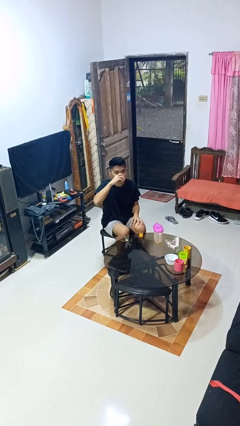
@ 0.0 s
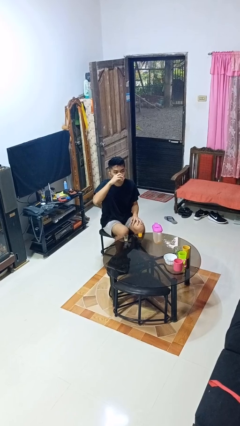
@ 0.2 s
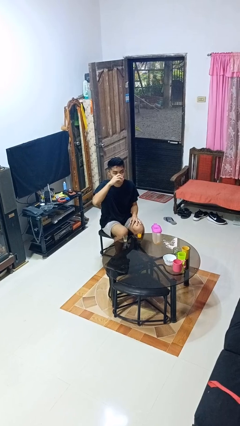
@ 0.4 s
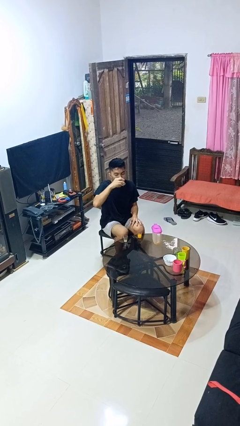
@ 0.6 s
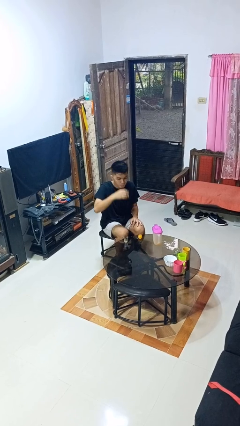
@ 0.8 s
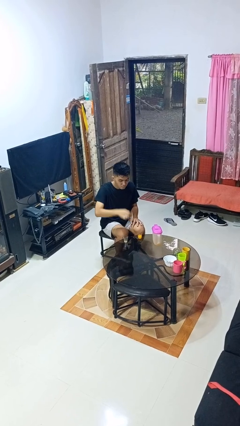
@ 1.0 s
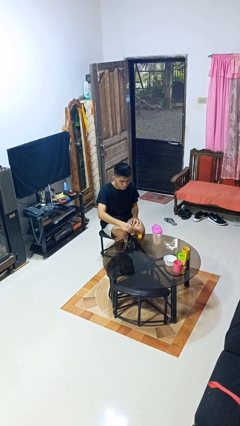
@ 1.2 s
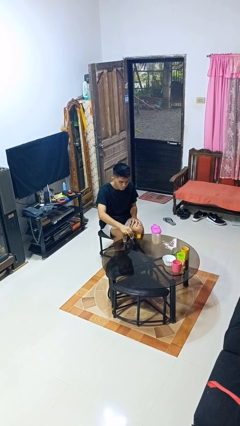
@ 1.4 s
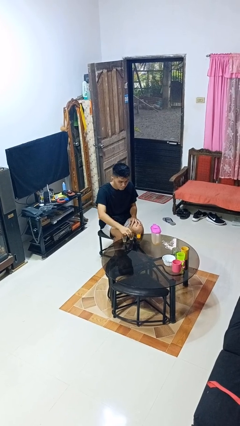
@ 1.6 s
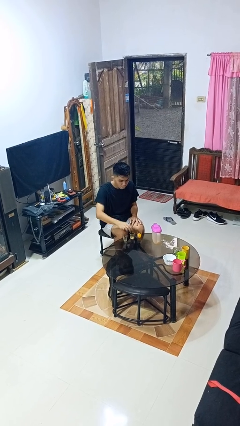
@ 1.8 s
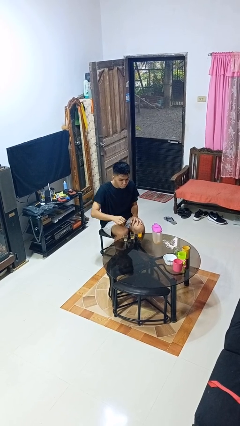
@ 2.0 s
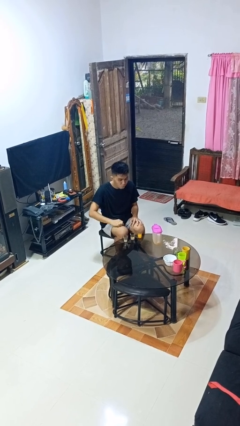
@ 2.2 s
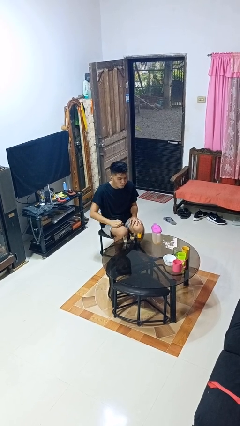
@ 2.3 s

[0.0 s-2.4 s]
person puts down object on table

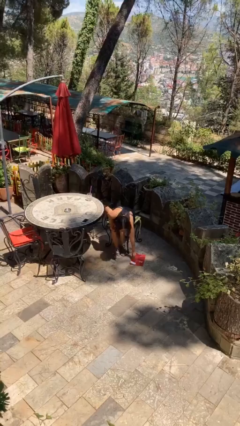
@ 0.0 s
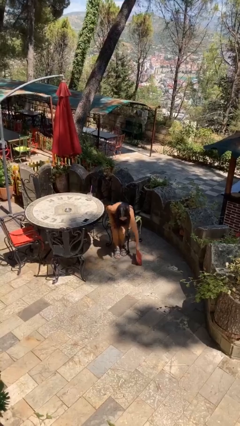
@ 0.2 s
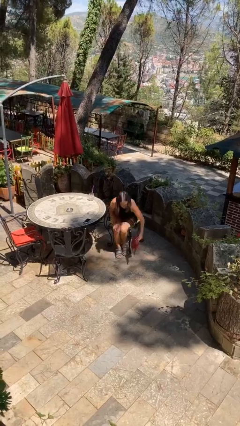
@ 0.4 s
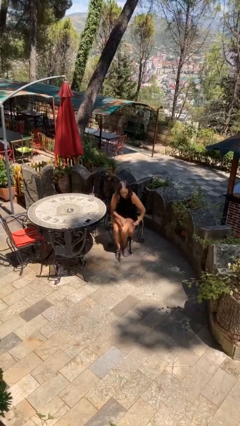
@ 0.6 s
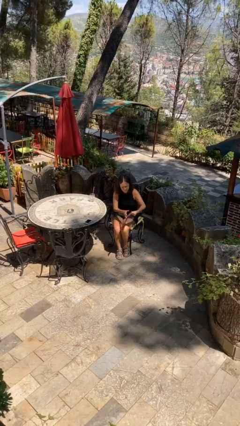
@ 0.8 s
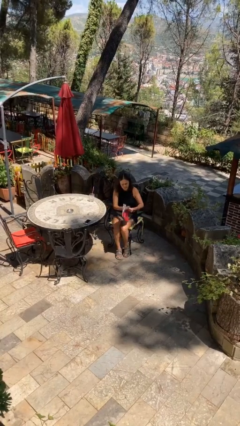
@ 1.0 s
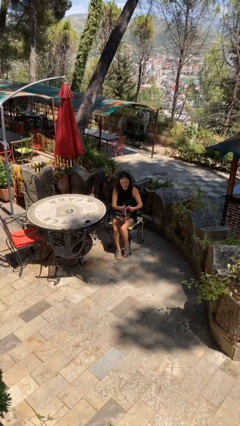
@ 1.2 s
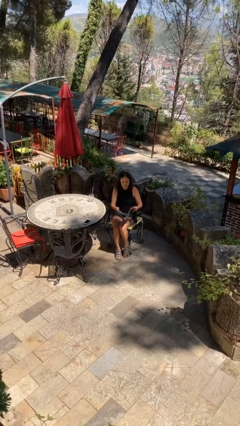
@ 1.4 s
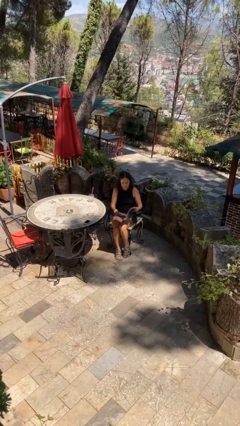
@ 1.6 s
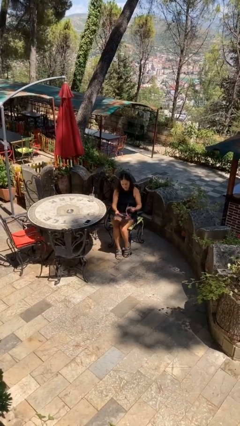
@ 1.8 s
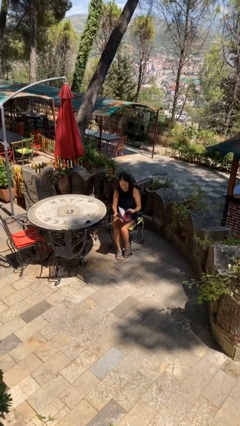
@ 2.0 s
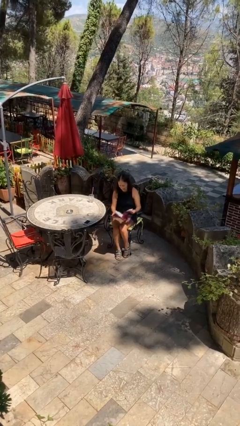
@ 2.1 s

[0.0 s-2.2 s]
person picks up object from floor

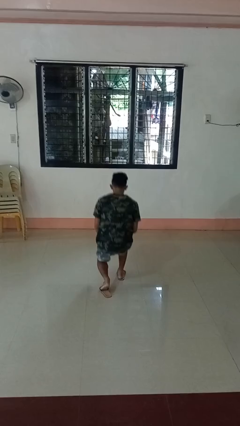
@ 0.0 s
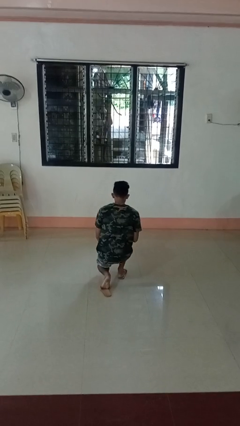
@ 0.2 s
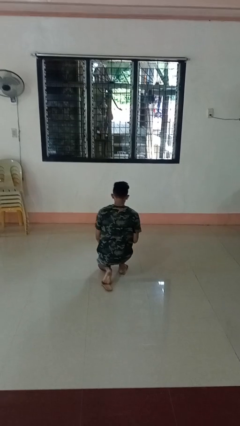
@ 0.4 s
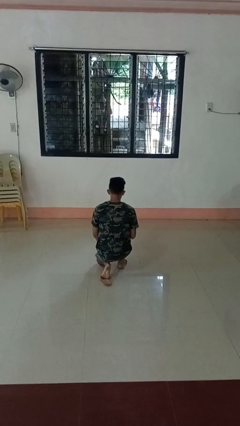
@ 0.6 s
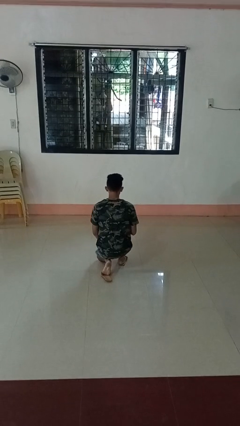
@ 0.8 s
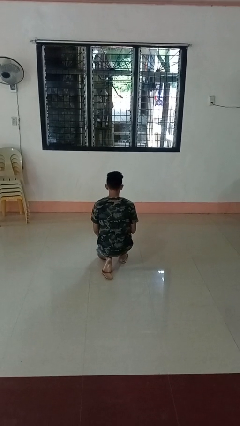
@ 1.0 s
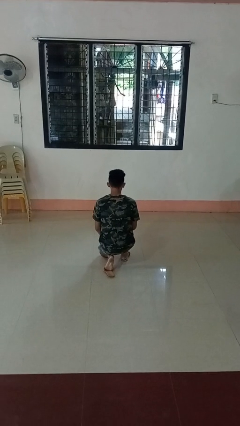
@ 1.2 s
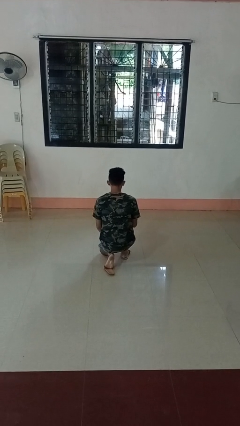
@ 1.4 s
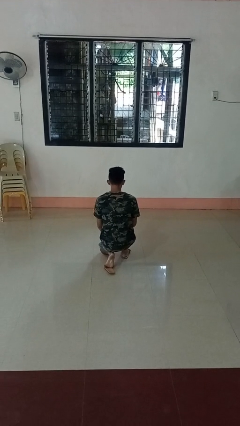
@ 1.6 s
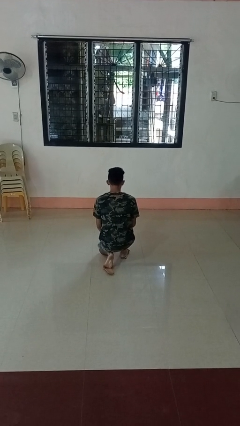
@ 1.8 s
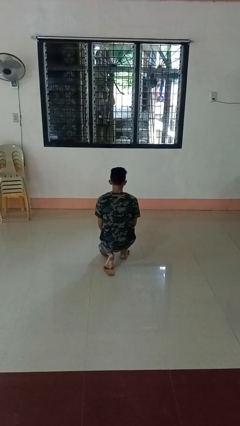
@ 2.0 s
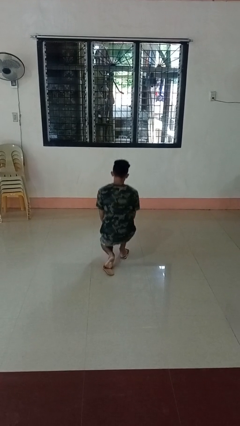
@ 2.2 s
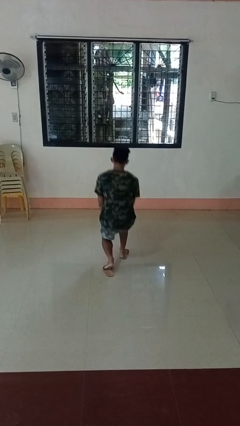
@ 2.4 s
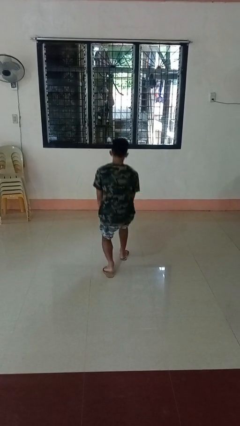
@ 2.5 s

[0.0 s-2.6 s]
person kneels

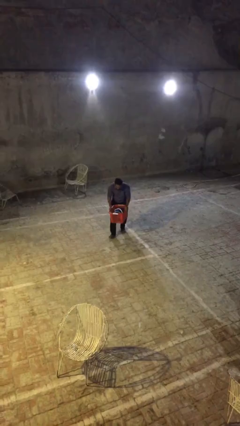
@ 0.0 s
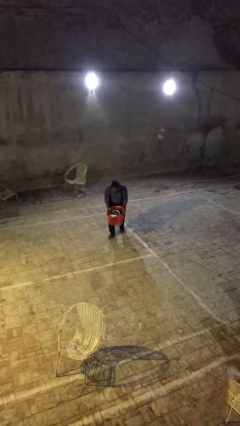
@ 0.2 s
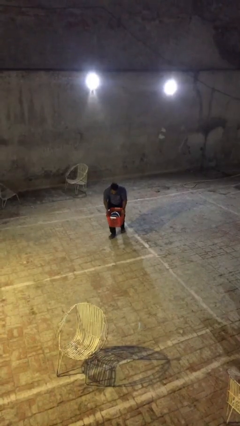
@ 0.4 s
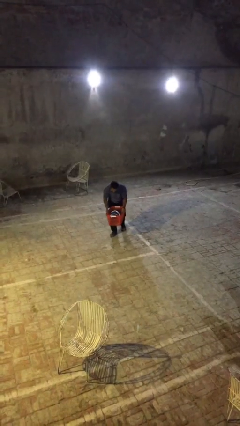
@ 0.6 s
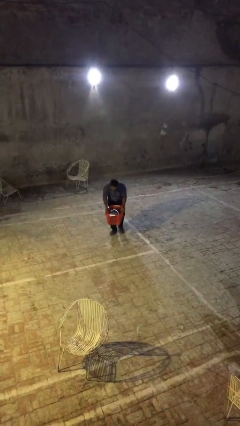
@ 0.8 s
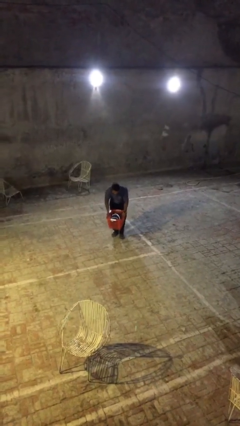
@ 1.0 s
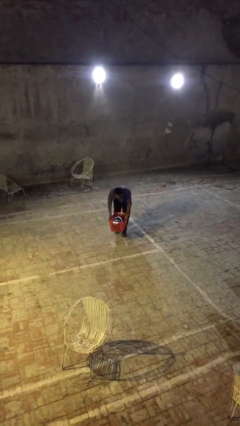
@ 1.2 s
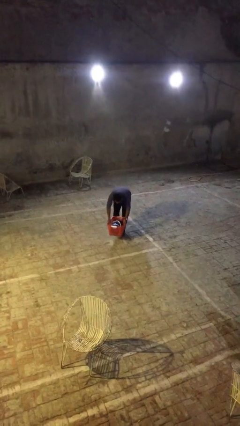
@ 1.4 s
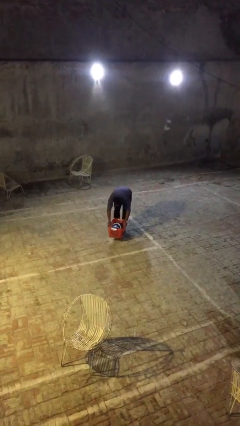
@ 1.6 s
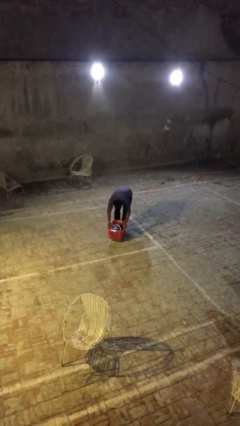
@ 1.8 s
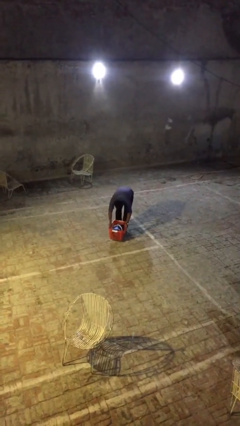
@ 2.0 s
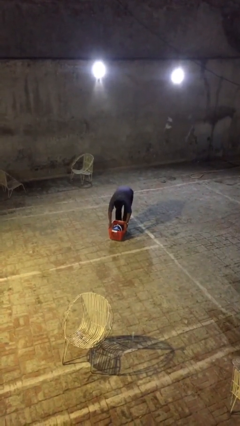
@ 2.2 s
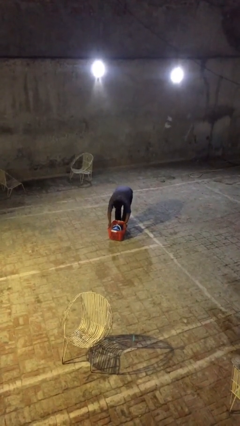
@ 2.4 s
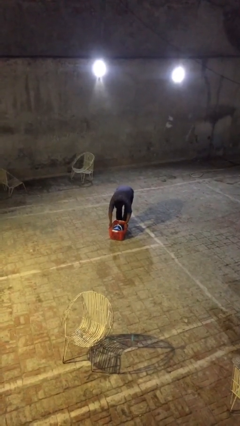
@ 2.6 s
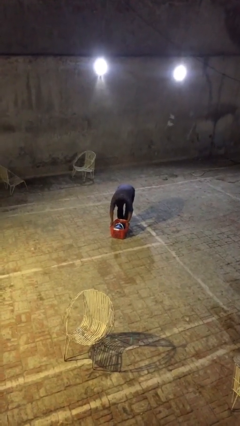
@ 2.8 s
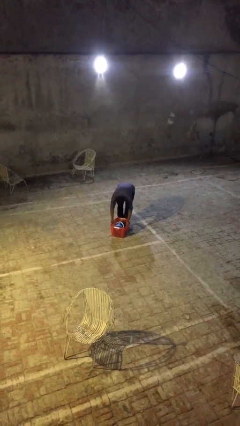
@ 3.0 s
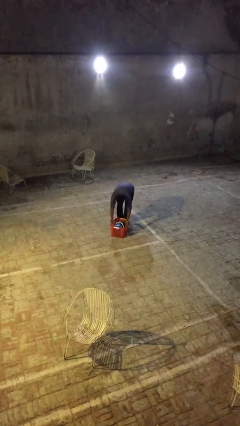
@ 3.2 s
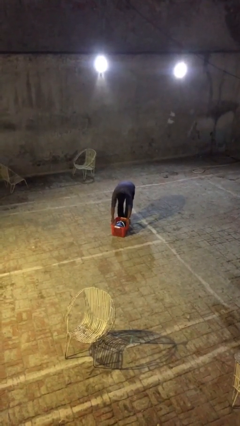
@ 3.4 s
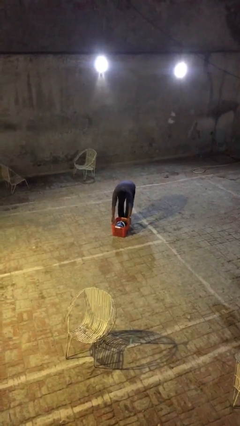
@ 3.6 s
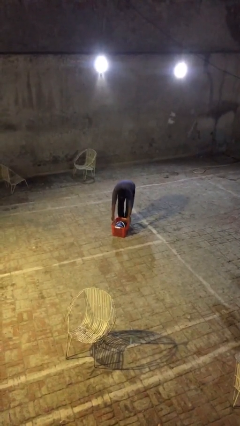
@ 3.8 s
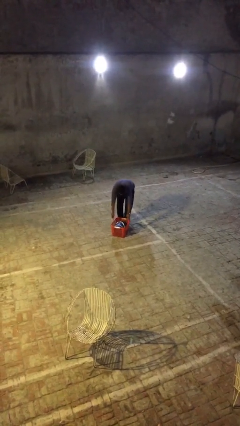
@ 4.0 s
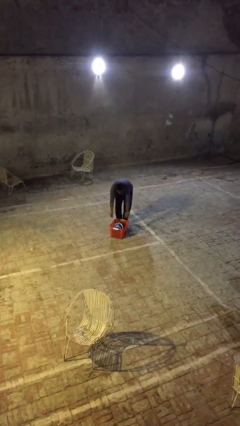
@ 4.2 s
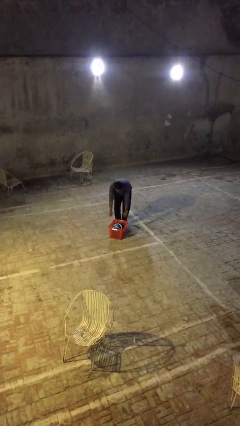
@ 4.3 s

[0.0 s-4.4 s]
person puts down object on floor

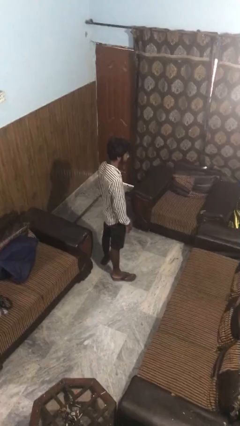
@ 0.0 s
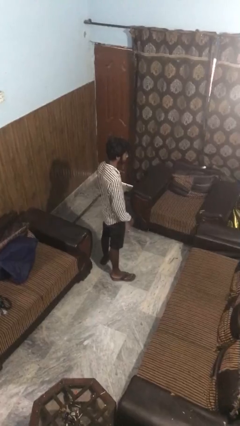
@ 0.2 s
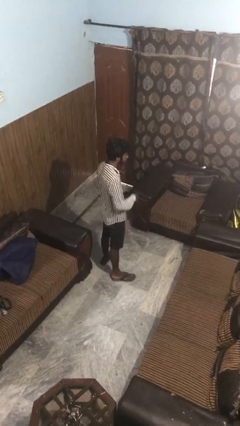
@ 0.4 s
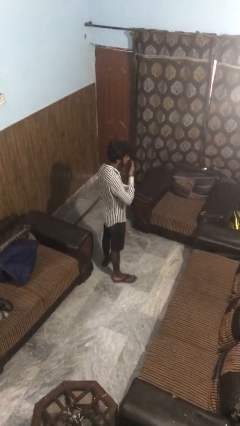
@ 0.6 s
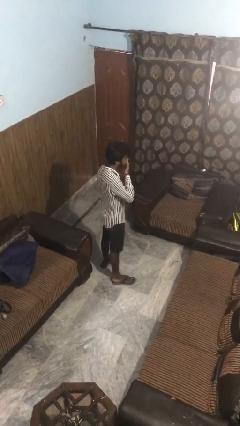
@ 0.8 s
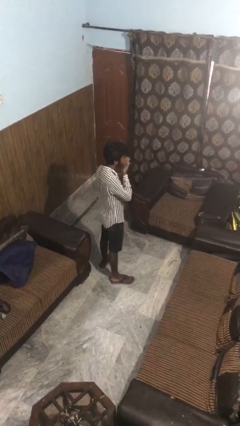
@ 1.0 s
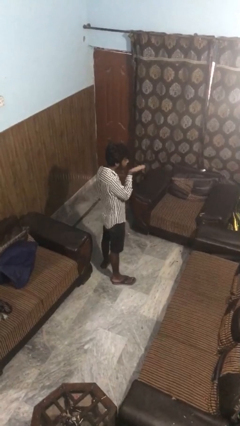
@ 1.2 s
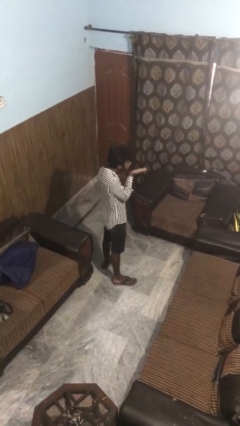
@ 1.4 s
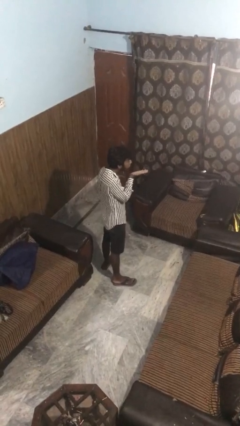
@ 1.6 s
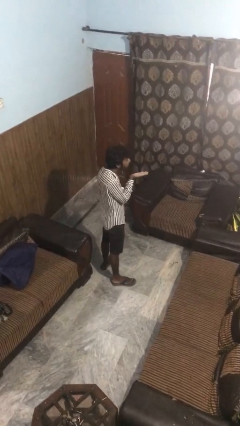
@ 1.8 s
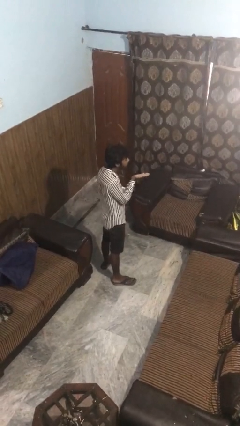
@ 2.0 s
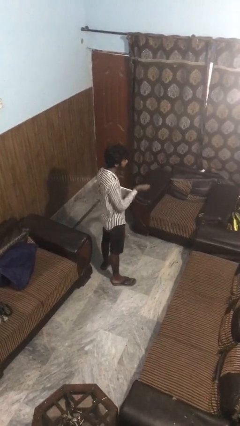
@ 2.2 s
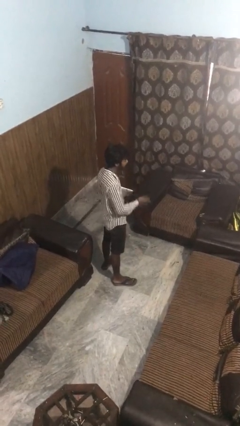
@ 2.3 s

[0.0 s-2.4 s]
person gestures blow kiss

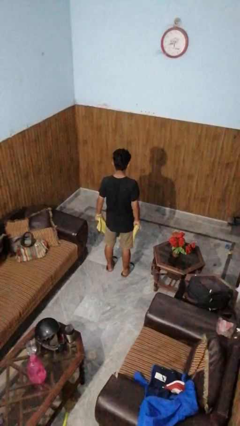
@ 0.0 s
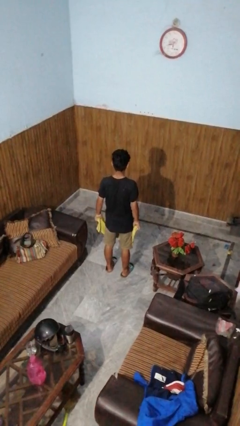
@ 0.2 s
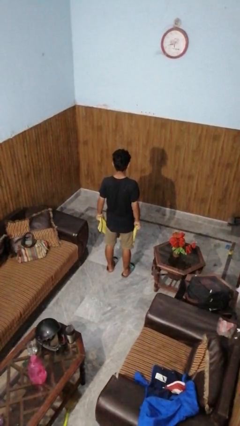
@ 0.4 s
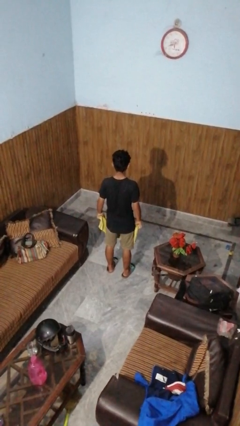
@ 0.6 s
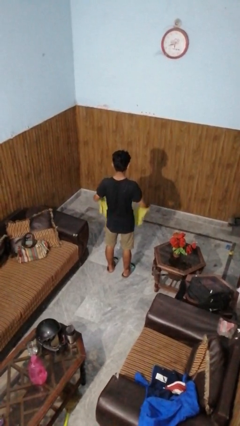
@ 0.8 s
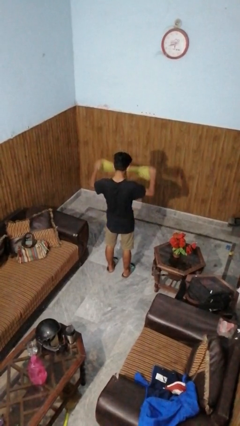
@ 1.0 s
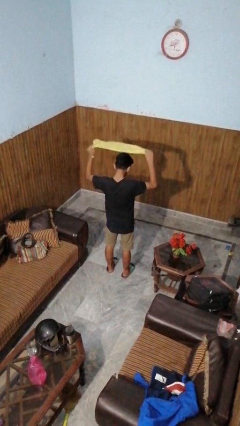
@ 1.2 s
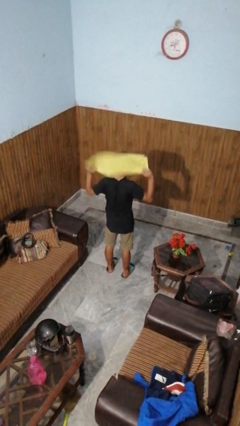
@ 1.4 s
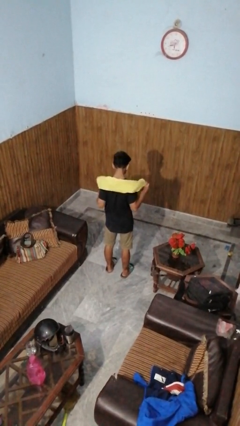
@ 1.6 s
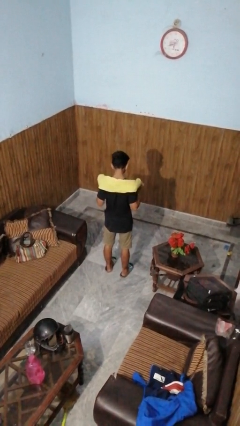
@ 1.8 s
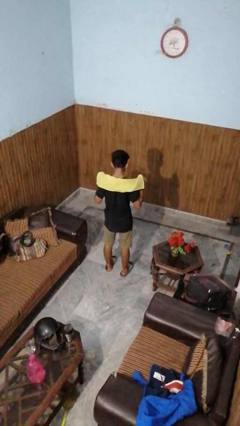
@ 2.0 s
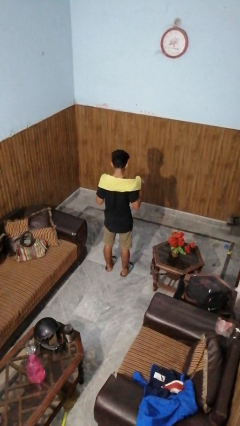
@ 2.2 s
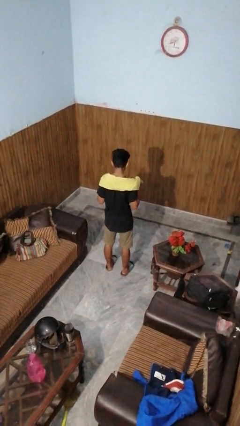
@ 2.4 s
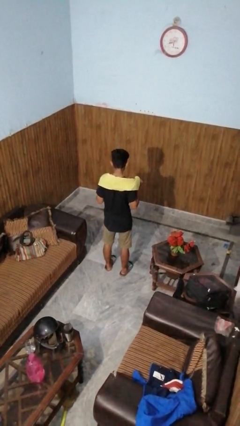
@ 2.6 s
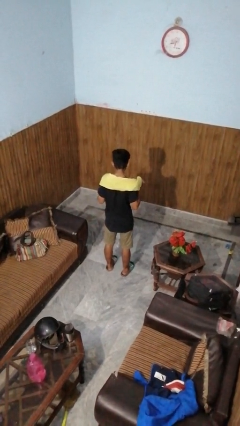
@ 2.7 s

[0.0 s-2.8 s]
person puts on scarf

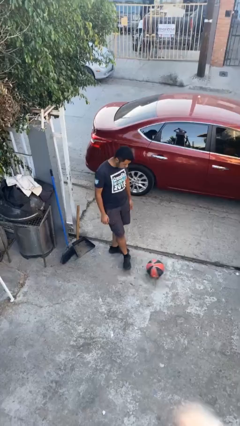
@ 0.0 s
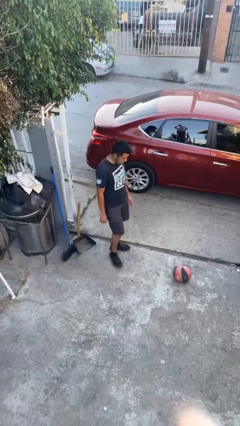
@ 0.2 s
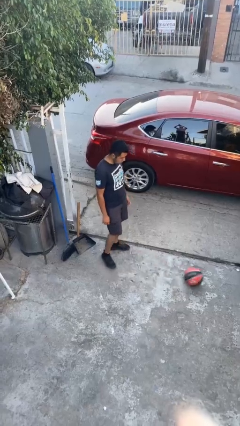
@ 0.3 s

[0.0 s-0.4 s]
person kicks object to person
